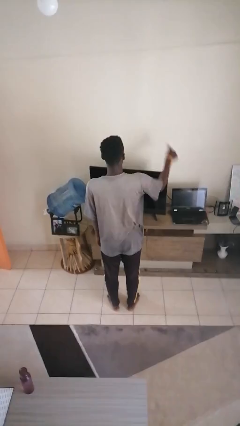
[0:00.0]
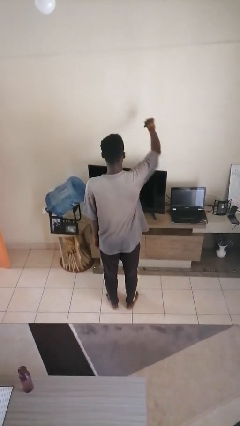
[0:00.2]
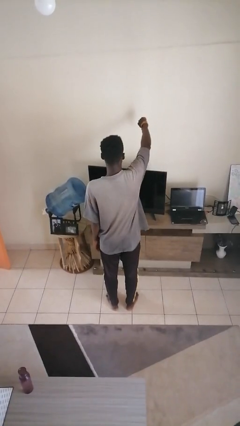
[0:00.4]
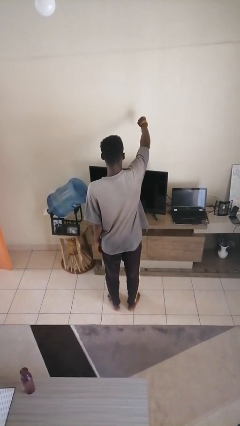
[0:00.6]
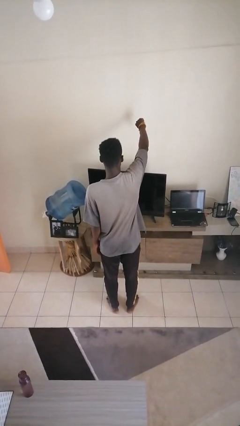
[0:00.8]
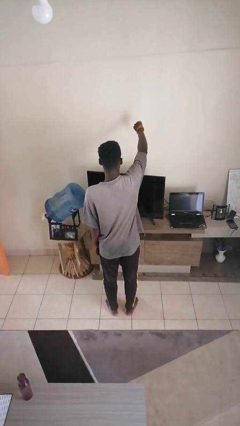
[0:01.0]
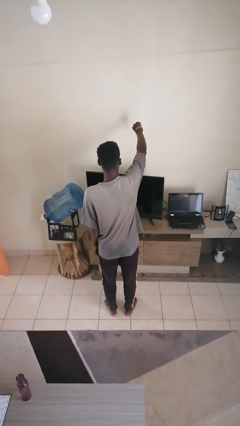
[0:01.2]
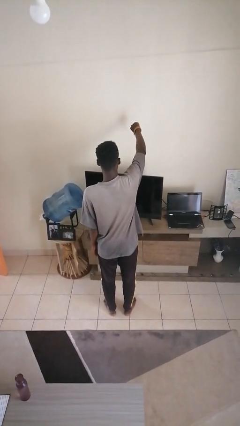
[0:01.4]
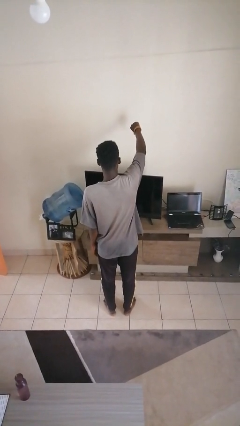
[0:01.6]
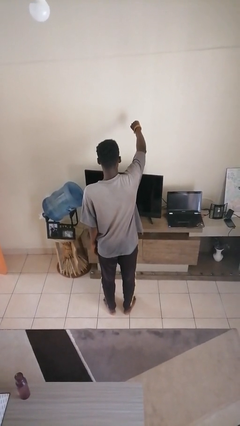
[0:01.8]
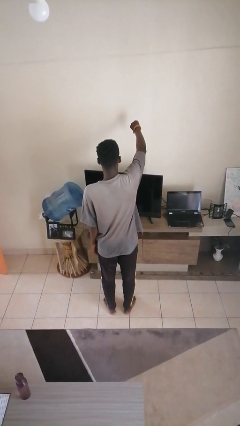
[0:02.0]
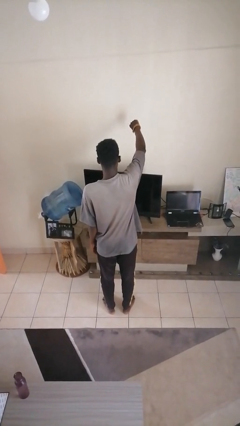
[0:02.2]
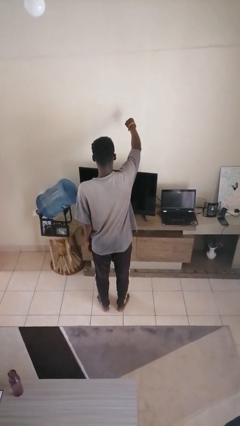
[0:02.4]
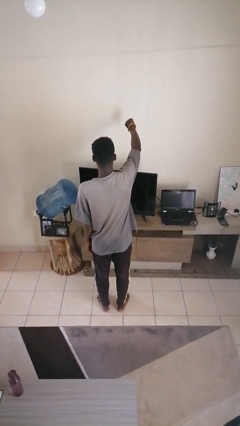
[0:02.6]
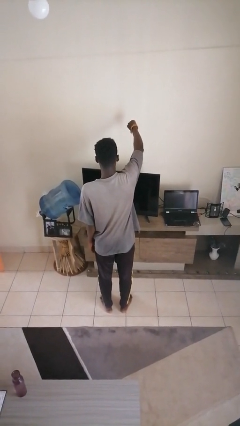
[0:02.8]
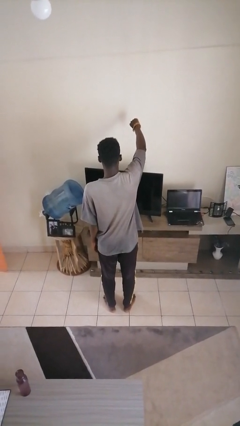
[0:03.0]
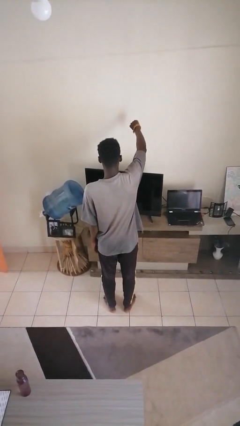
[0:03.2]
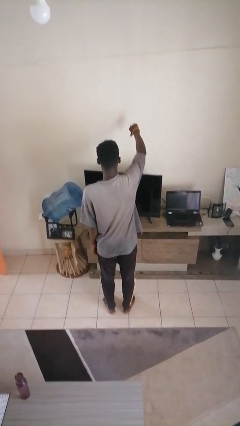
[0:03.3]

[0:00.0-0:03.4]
person gestures thumbs down

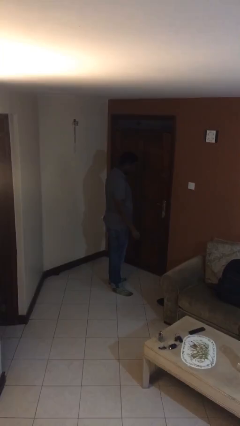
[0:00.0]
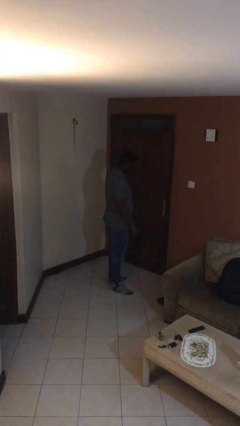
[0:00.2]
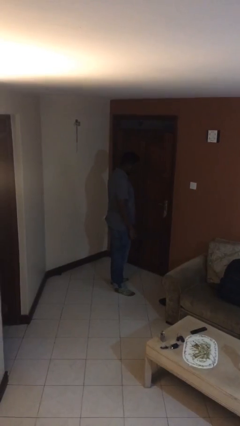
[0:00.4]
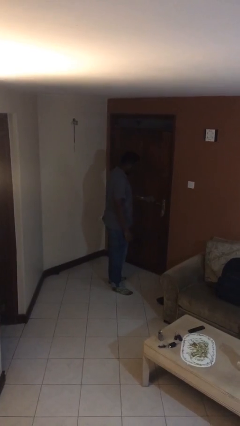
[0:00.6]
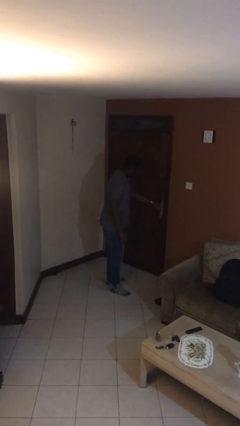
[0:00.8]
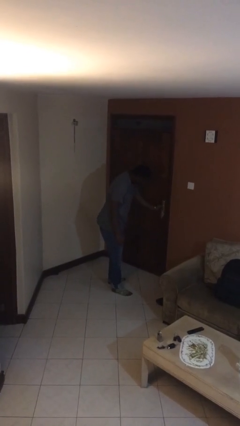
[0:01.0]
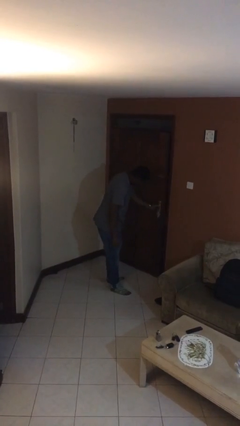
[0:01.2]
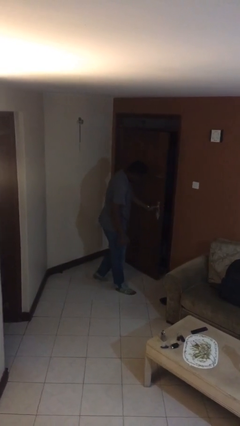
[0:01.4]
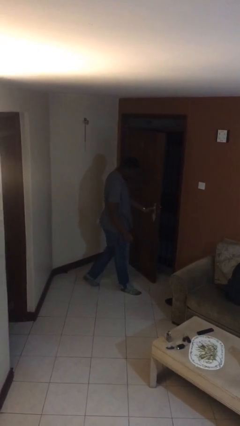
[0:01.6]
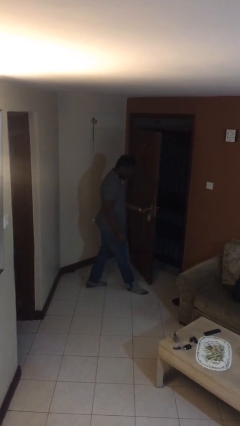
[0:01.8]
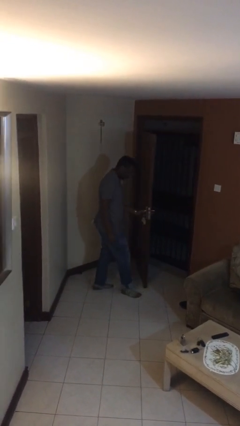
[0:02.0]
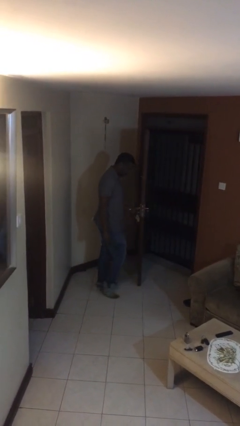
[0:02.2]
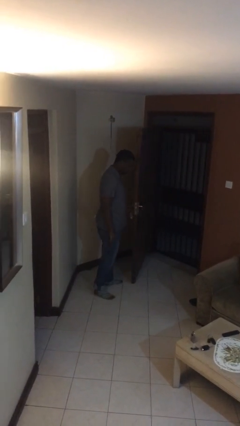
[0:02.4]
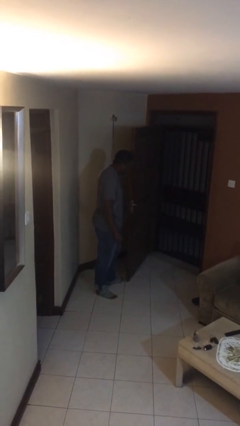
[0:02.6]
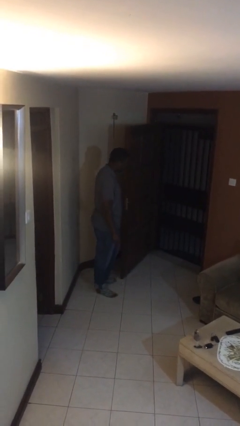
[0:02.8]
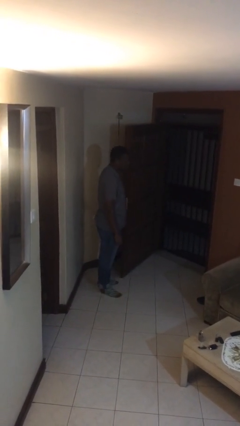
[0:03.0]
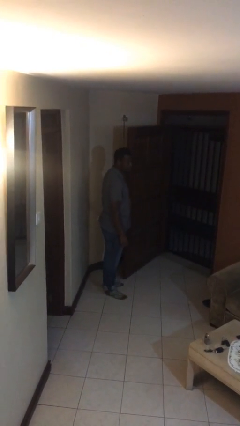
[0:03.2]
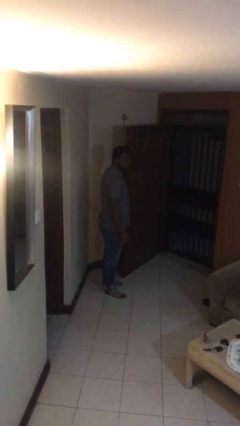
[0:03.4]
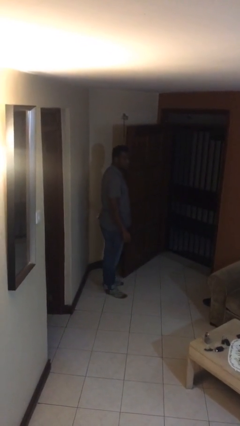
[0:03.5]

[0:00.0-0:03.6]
person opens facility door

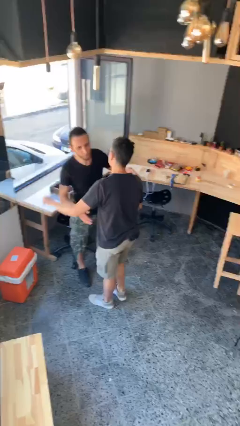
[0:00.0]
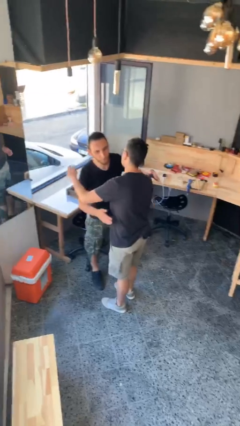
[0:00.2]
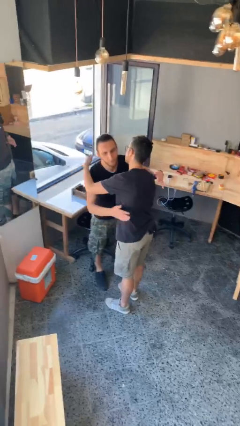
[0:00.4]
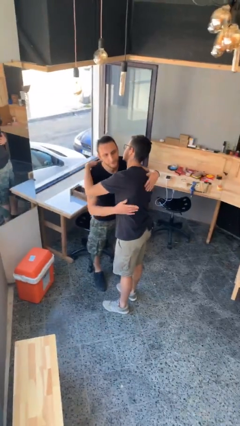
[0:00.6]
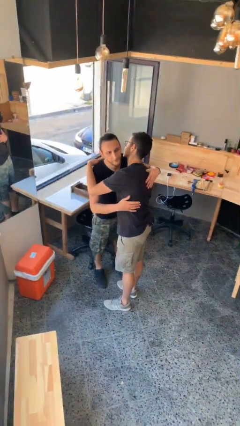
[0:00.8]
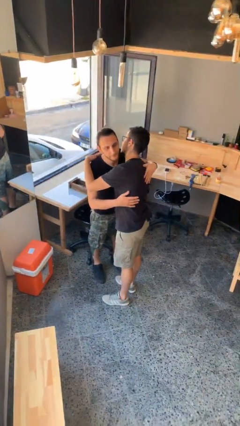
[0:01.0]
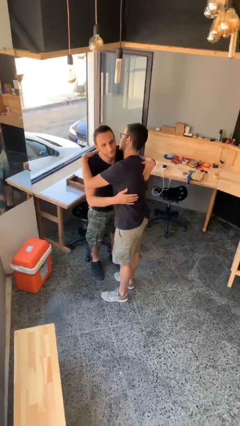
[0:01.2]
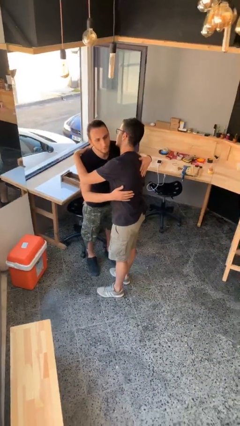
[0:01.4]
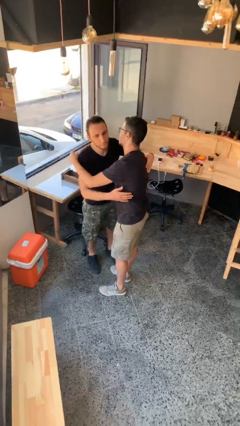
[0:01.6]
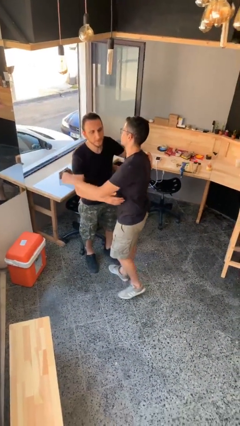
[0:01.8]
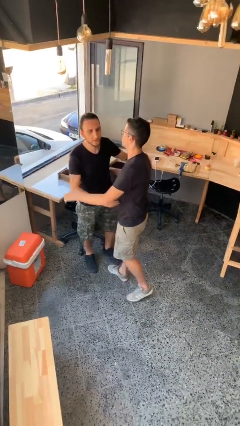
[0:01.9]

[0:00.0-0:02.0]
person embraces person

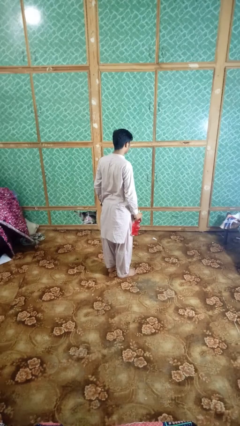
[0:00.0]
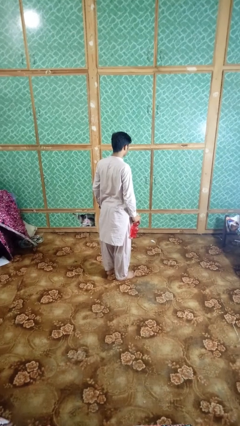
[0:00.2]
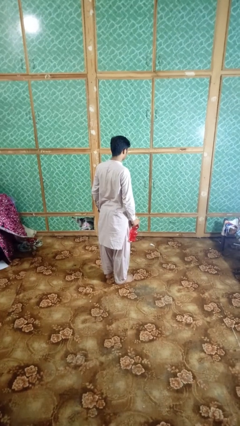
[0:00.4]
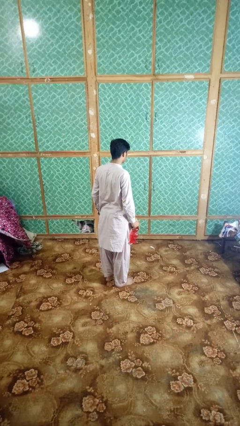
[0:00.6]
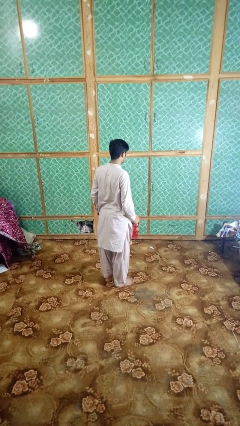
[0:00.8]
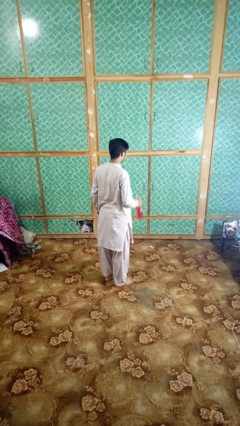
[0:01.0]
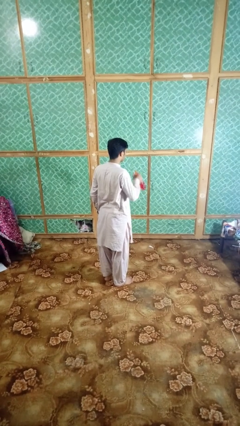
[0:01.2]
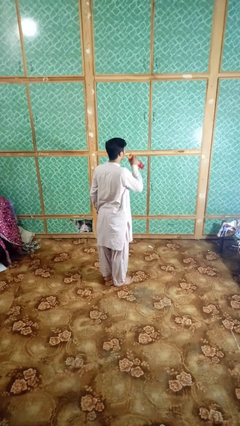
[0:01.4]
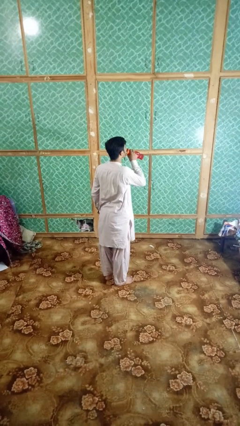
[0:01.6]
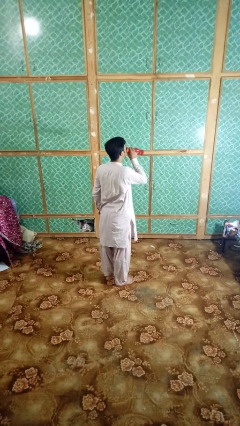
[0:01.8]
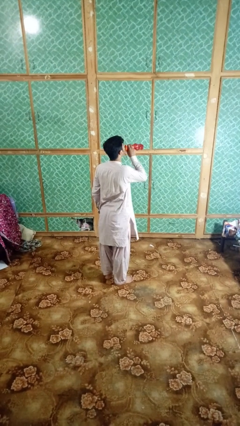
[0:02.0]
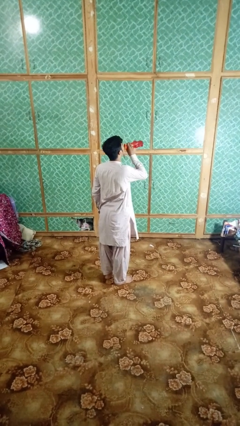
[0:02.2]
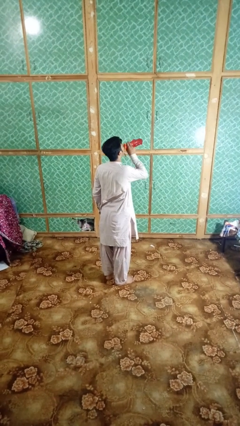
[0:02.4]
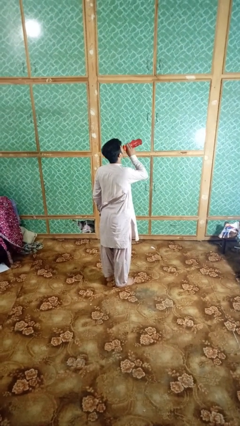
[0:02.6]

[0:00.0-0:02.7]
person drinks from bottle

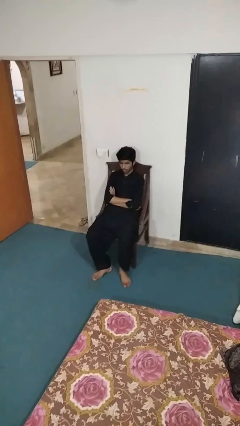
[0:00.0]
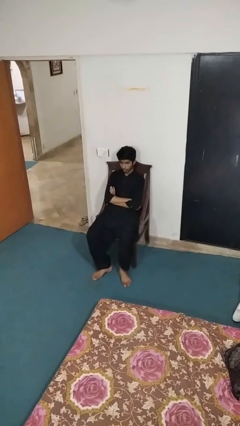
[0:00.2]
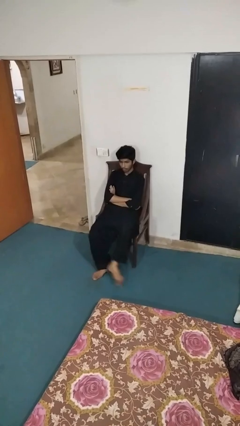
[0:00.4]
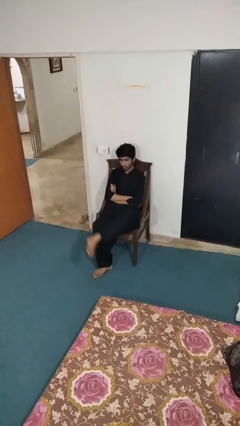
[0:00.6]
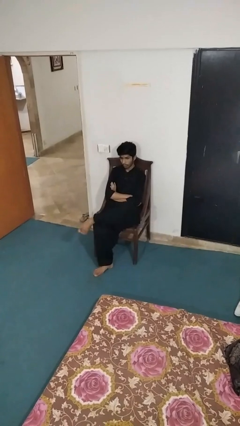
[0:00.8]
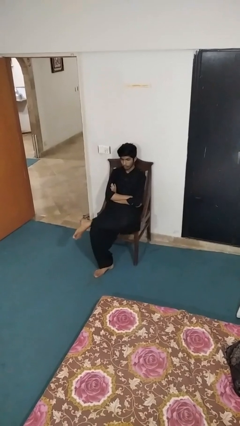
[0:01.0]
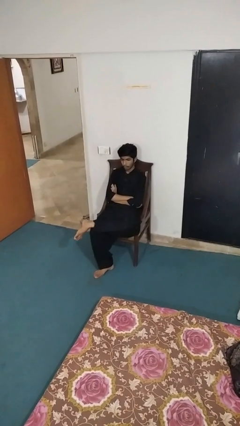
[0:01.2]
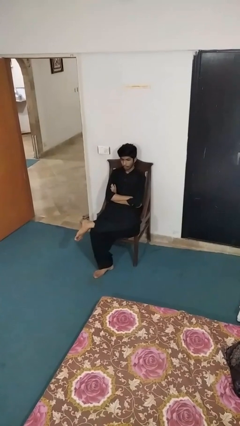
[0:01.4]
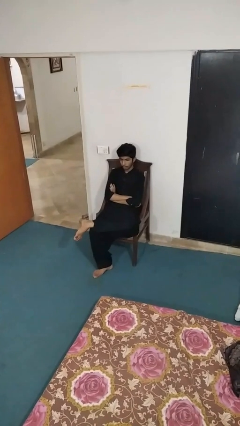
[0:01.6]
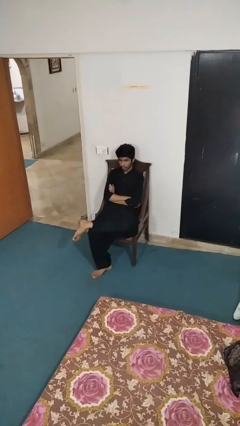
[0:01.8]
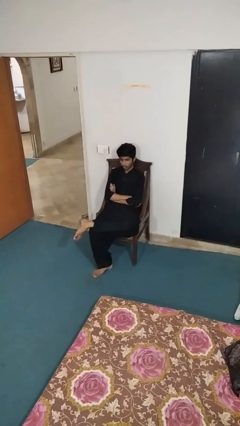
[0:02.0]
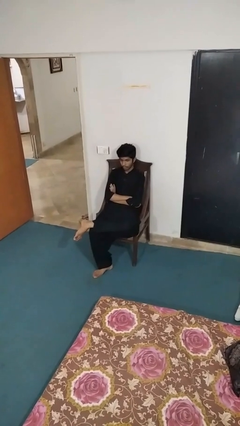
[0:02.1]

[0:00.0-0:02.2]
person crosses legs

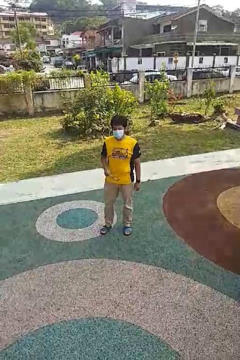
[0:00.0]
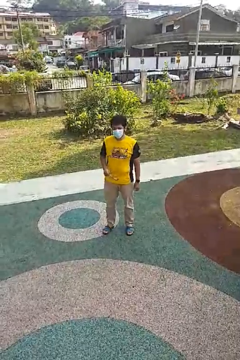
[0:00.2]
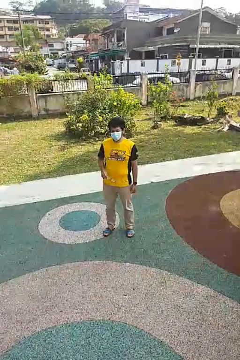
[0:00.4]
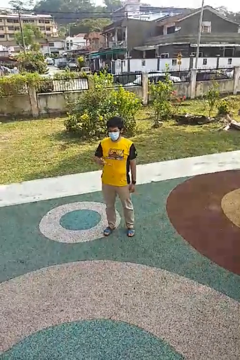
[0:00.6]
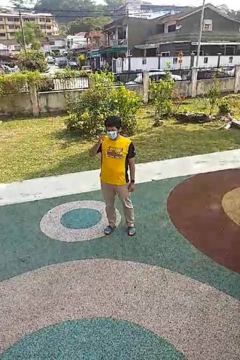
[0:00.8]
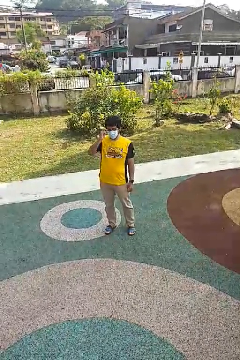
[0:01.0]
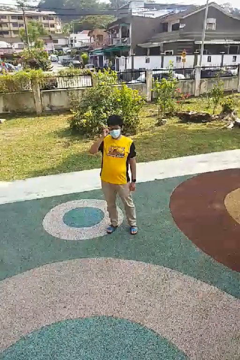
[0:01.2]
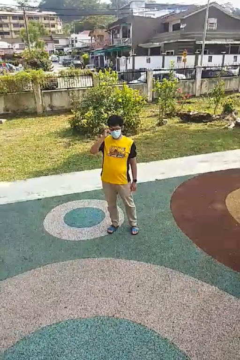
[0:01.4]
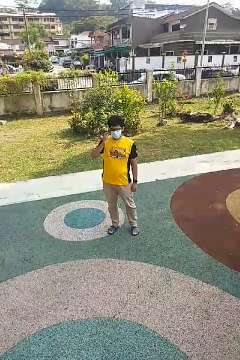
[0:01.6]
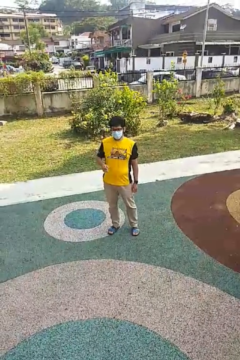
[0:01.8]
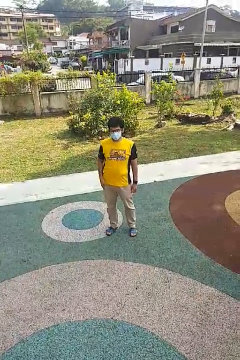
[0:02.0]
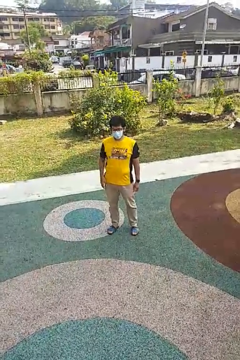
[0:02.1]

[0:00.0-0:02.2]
person puts on glasses

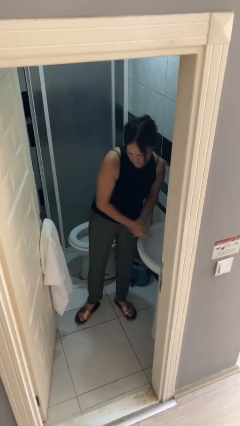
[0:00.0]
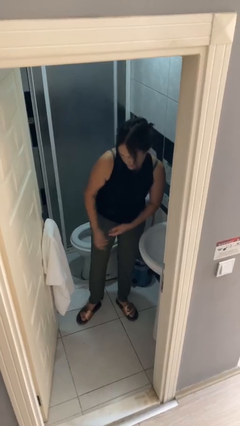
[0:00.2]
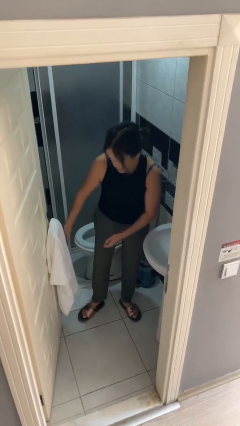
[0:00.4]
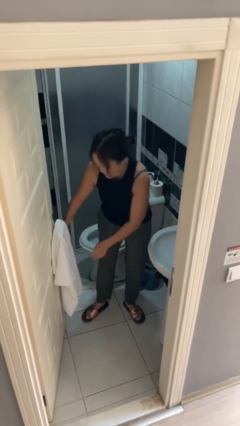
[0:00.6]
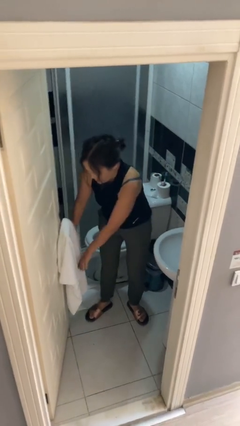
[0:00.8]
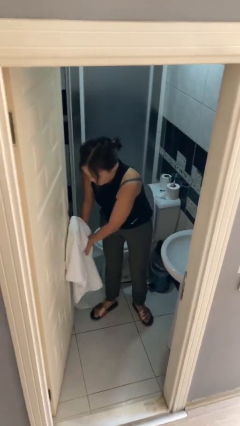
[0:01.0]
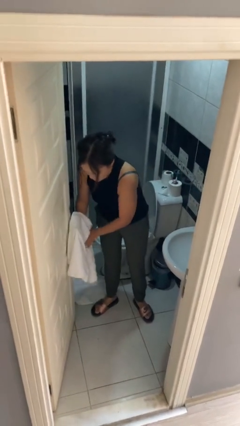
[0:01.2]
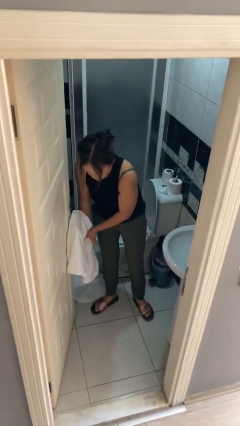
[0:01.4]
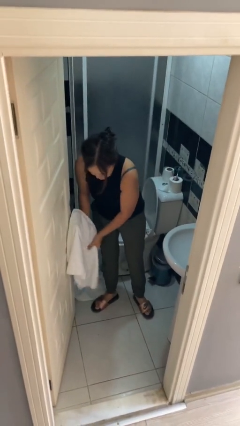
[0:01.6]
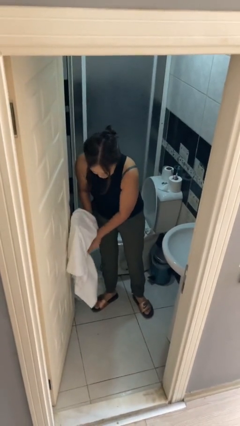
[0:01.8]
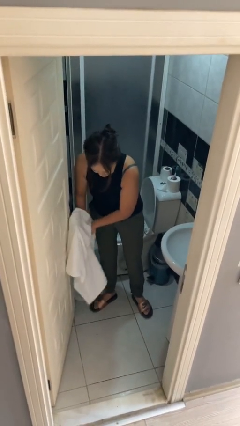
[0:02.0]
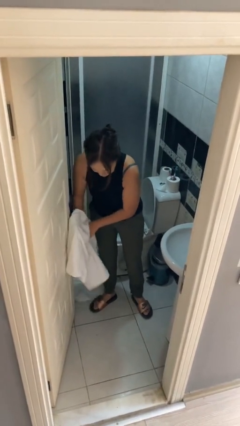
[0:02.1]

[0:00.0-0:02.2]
person dries hands with towel
